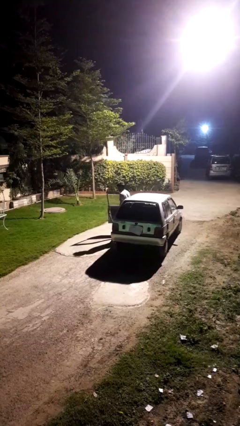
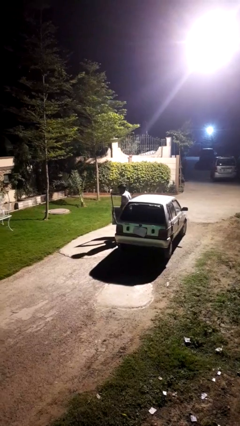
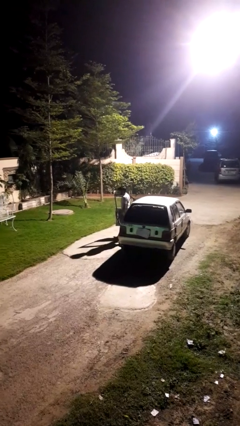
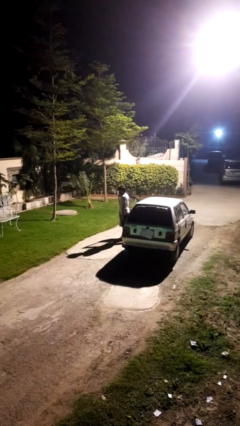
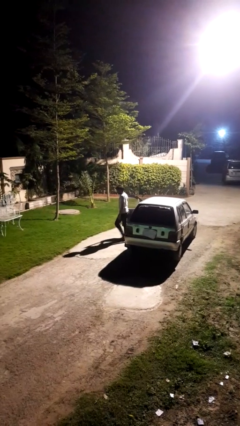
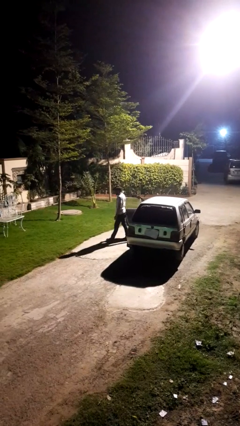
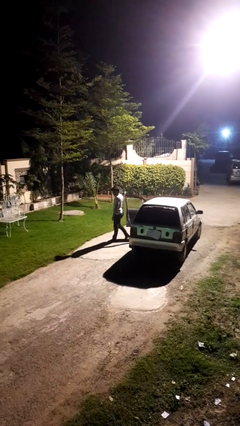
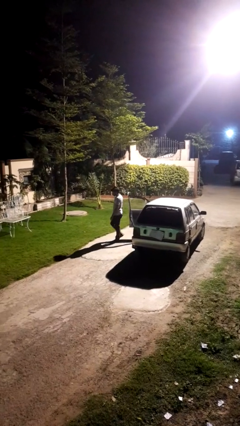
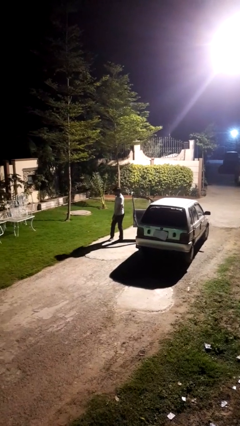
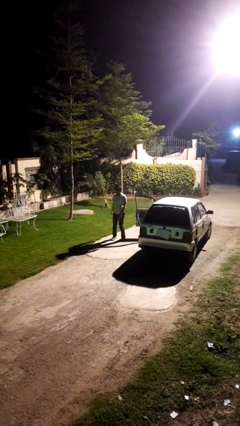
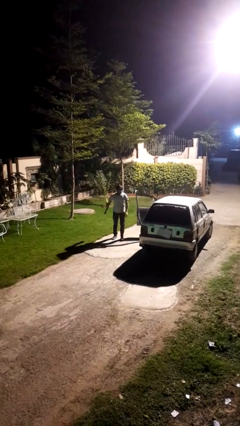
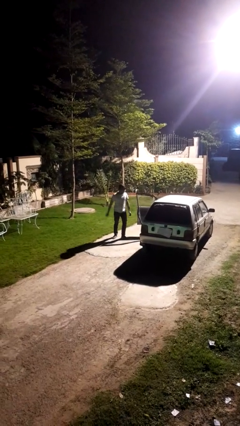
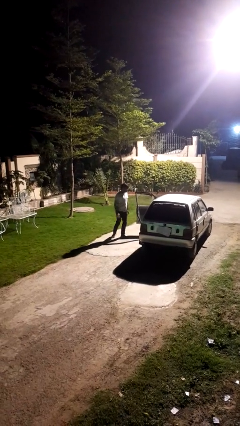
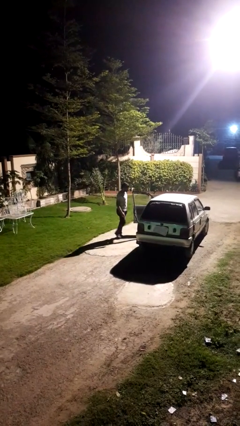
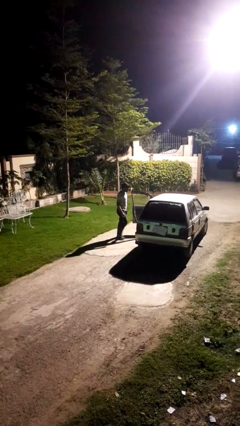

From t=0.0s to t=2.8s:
person exits car

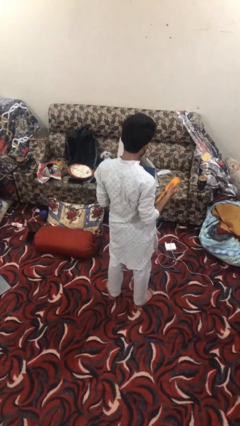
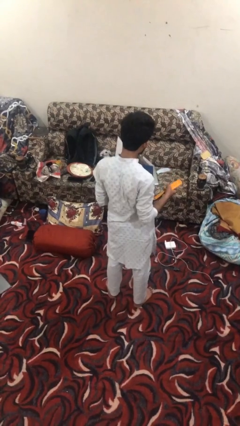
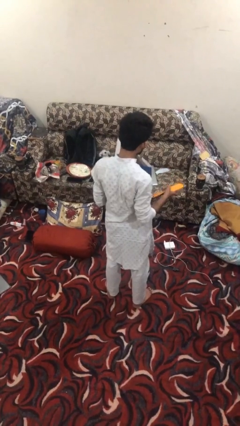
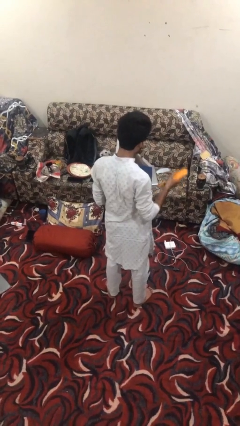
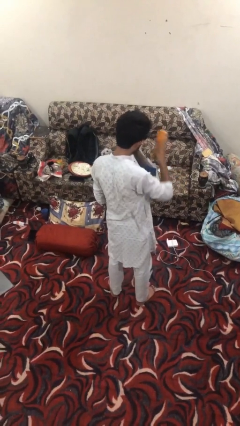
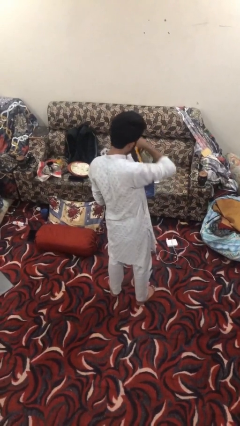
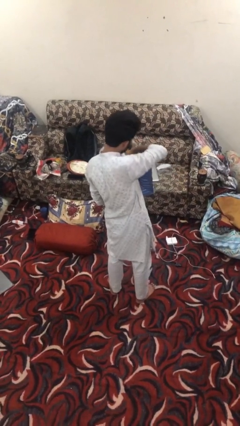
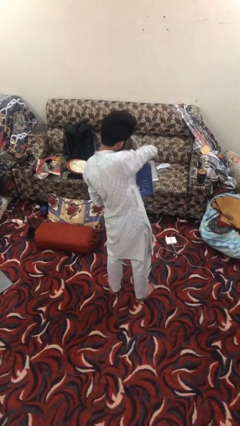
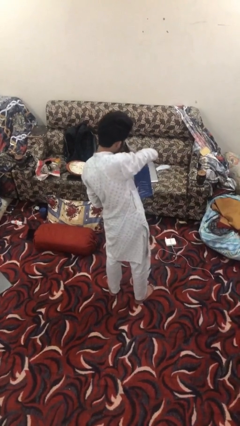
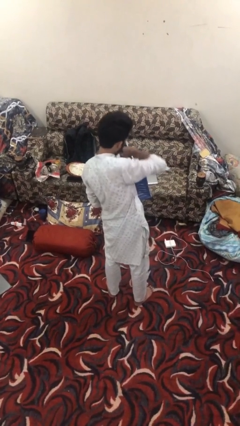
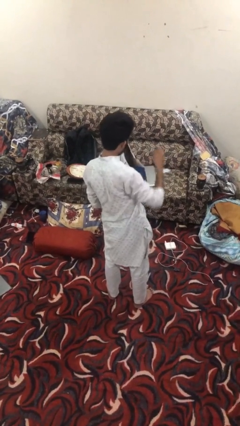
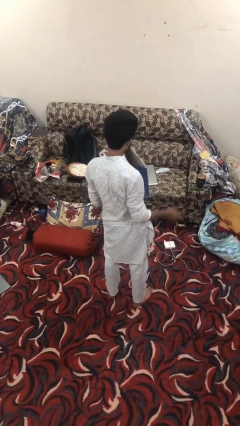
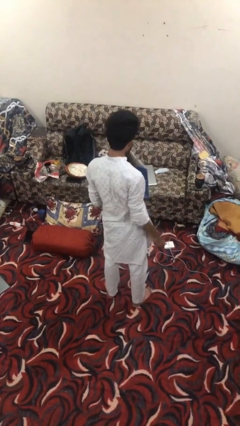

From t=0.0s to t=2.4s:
person puts object into bag

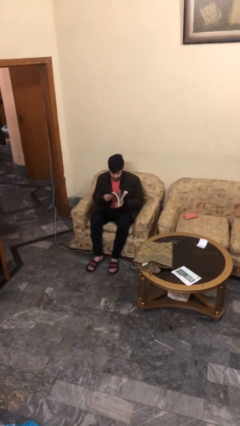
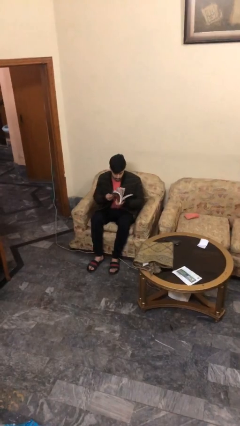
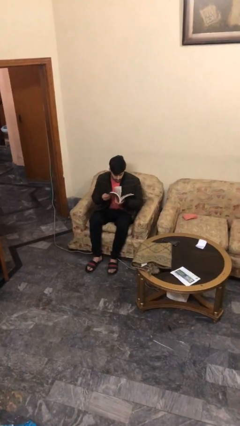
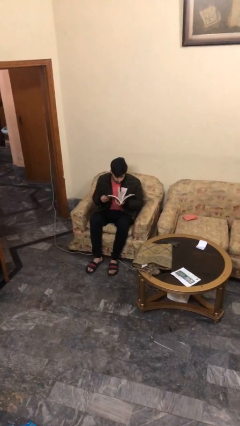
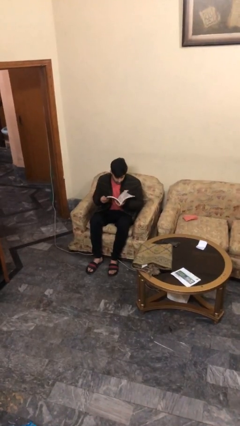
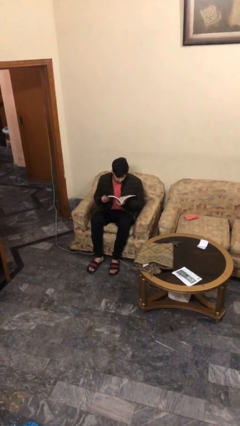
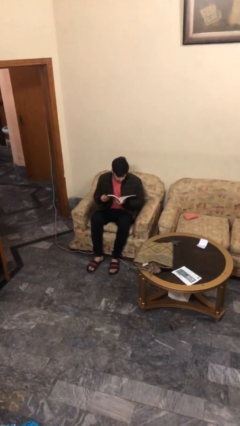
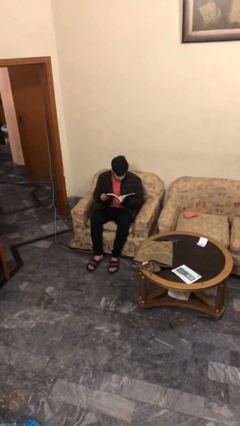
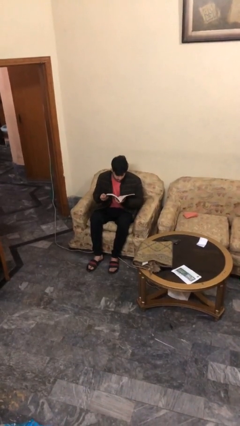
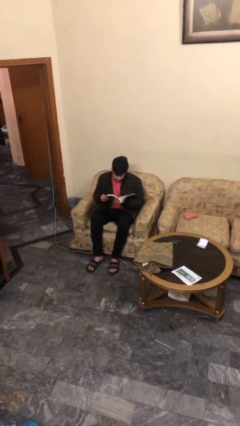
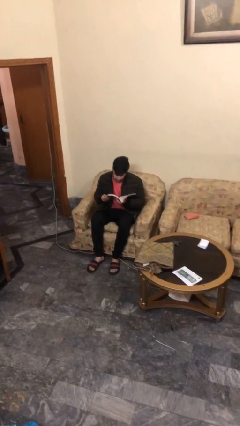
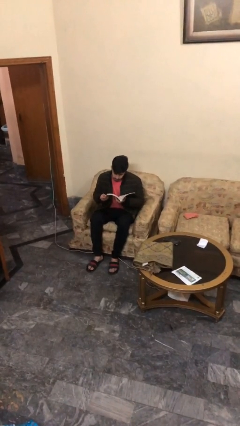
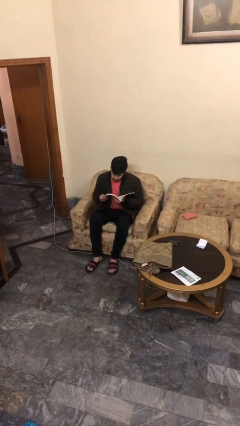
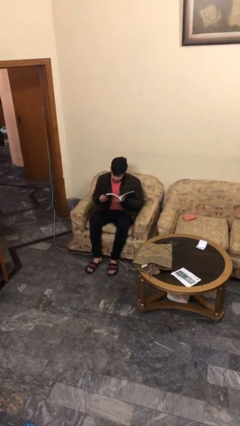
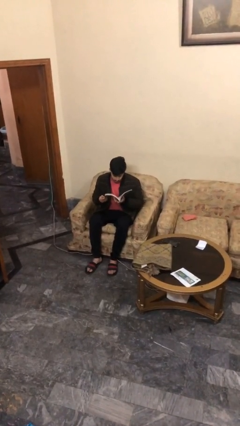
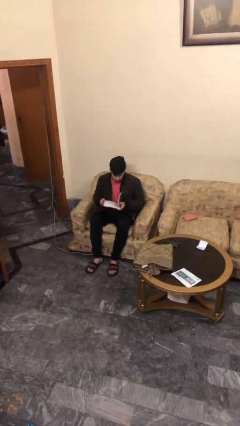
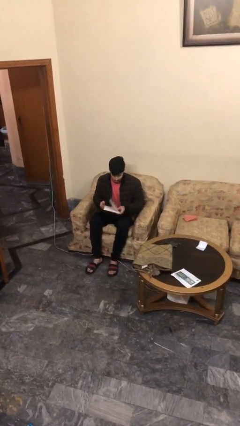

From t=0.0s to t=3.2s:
person reads document

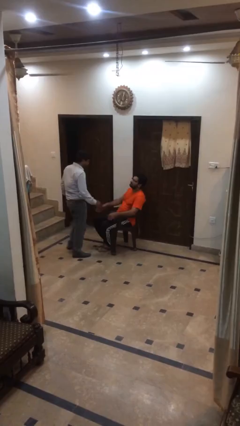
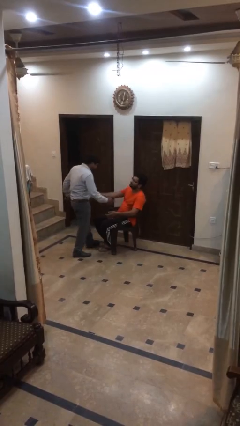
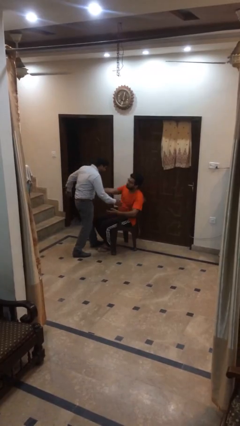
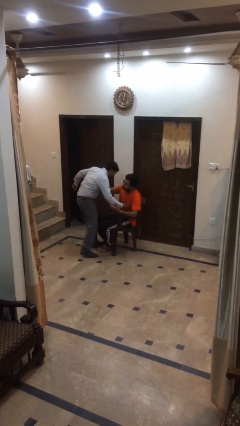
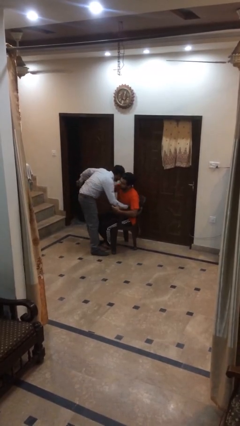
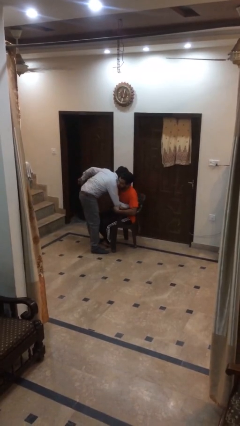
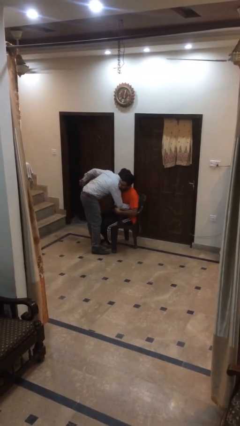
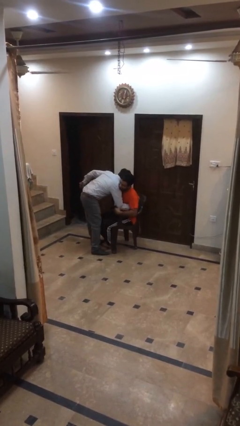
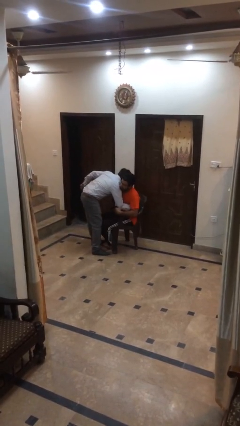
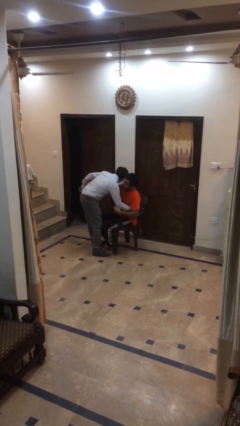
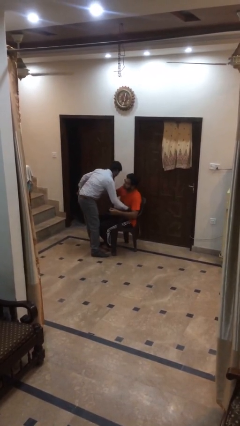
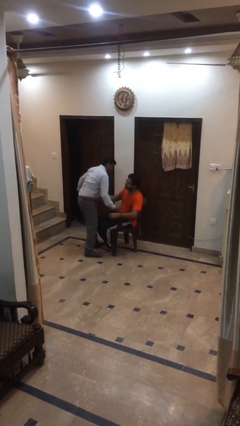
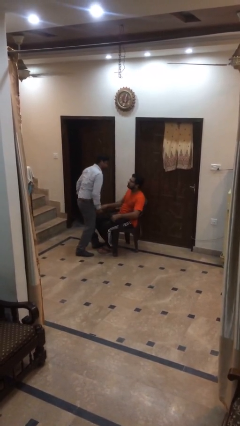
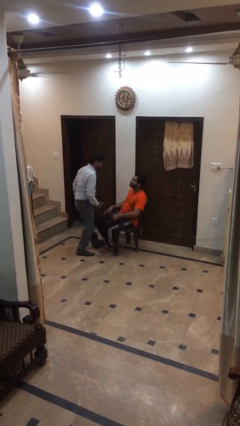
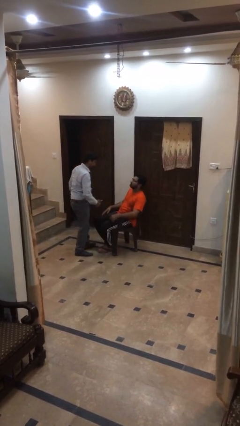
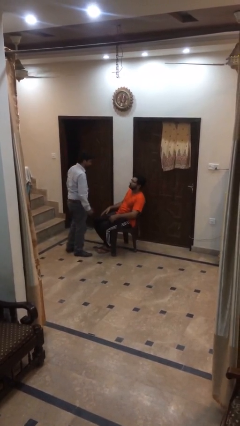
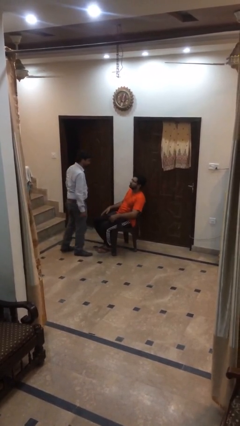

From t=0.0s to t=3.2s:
person embraces person

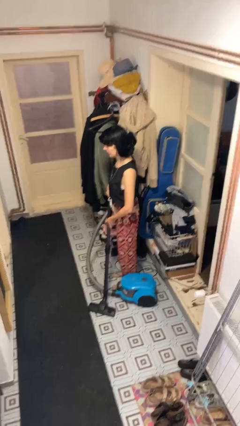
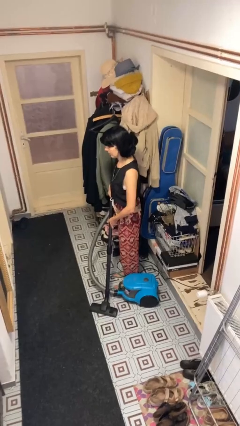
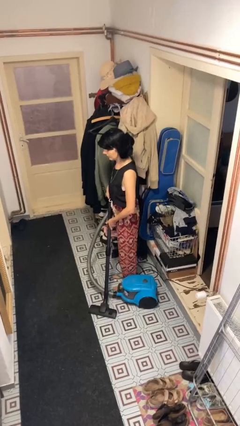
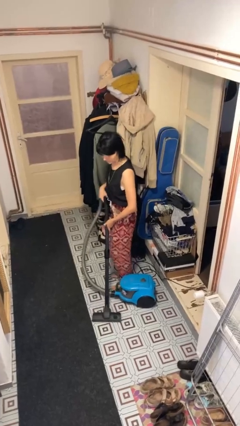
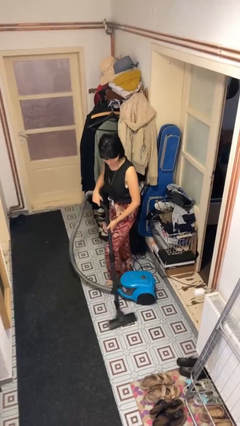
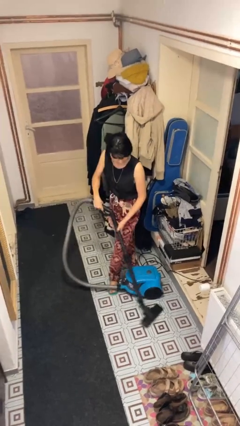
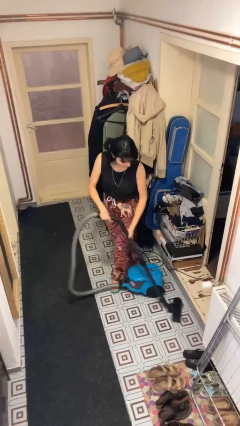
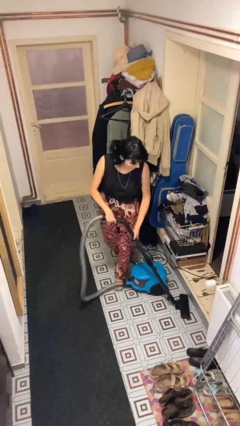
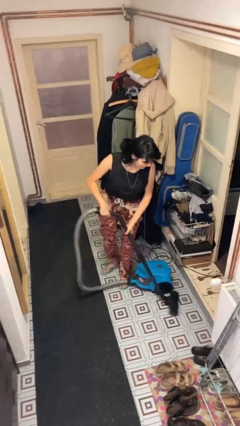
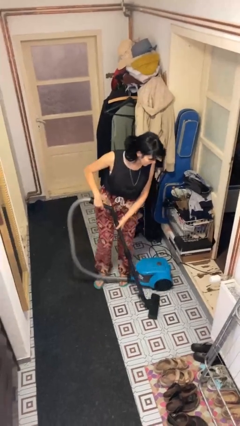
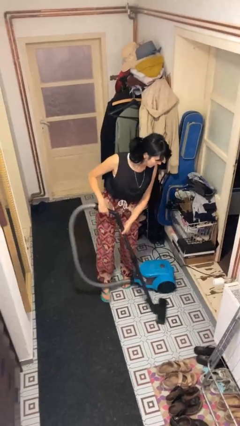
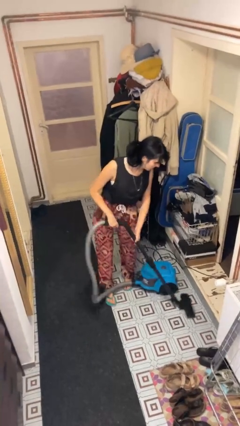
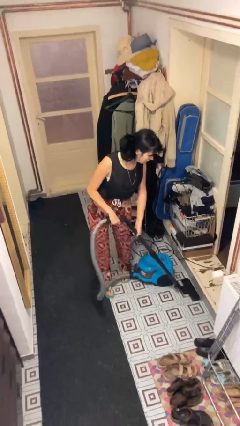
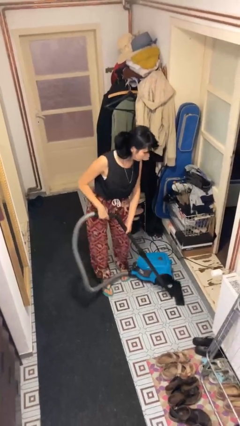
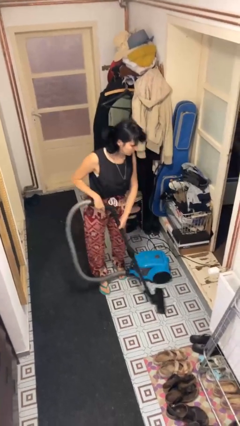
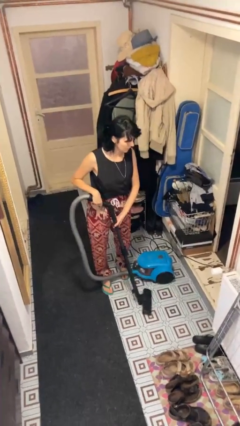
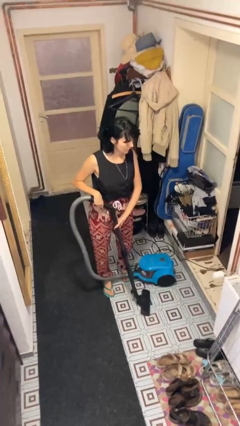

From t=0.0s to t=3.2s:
person vacuums carpet

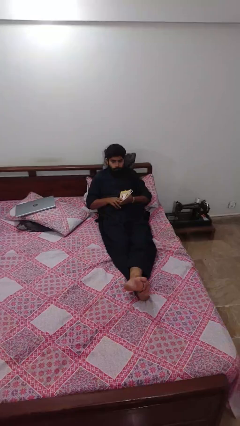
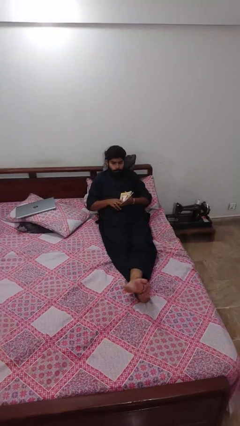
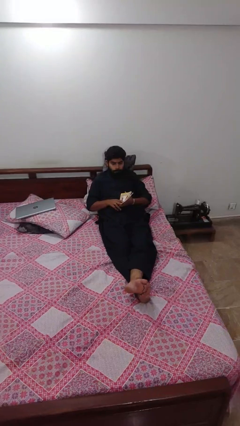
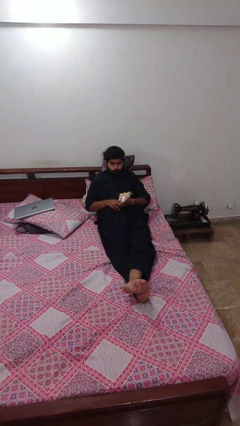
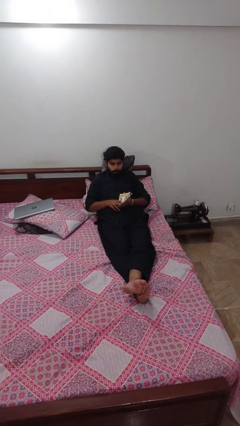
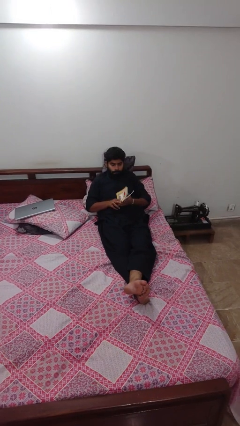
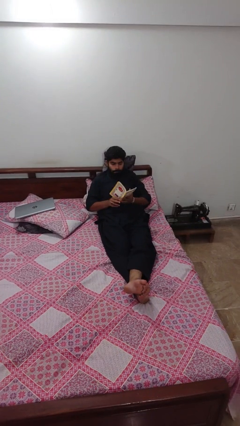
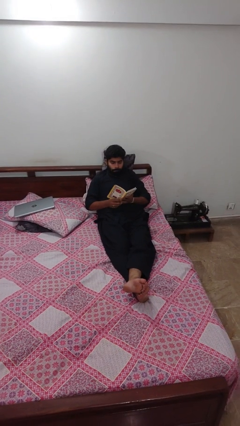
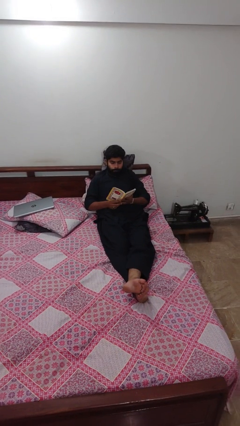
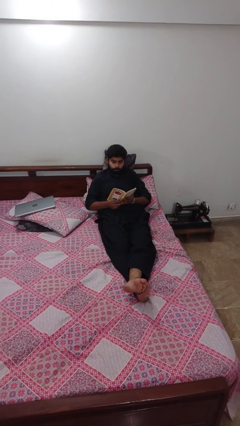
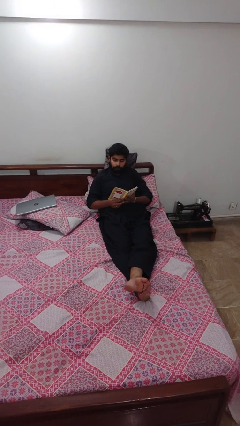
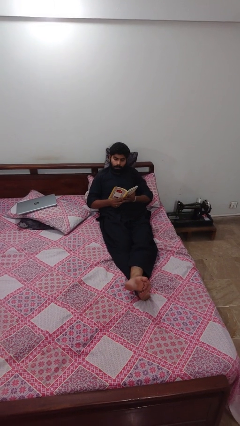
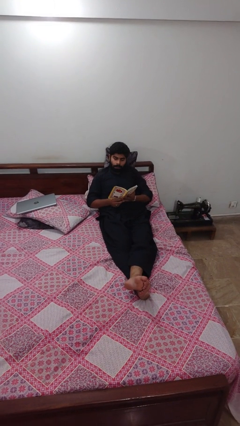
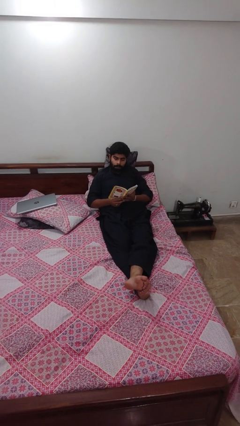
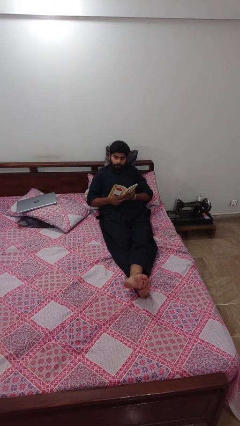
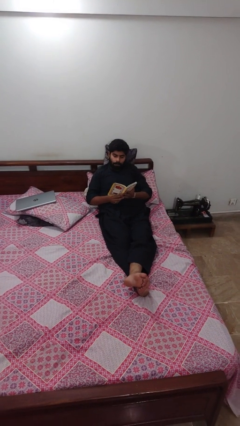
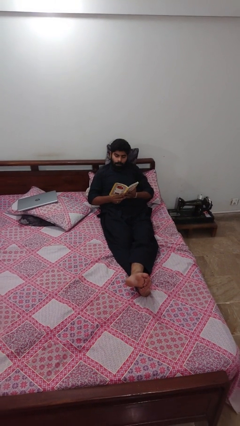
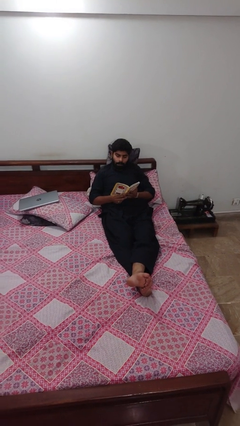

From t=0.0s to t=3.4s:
person reads book
